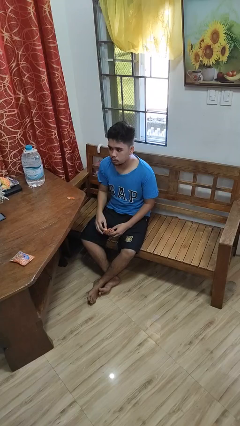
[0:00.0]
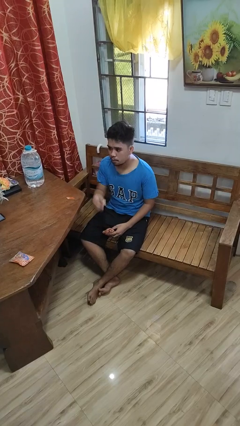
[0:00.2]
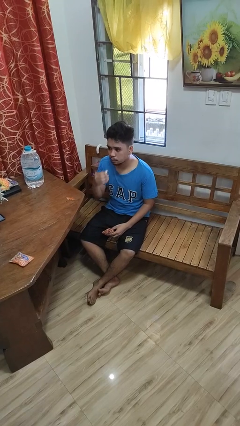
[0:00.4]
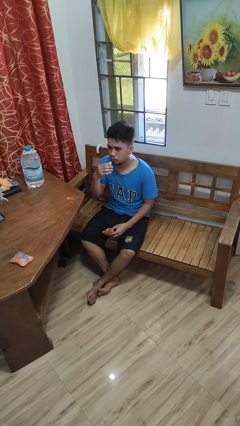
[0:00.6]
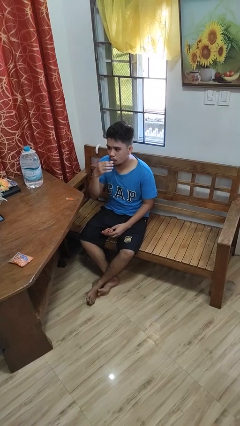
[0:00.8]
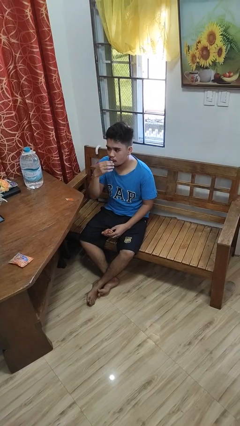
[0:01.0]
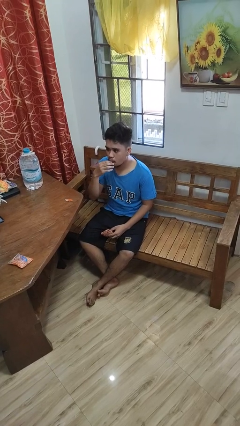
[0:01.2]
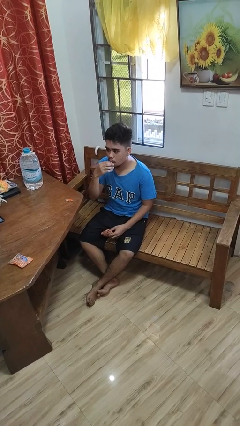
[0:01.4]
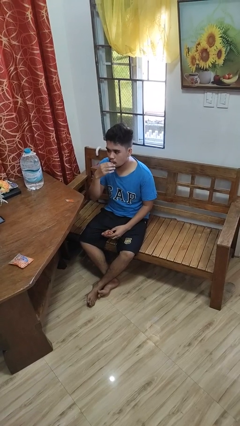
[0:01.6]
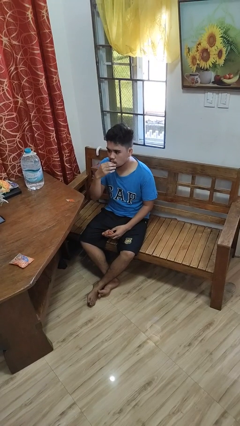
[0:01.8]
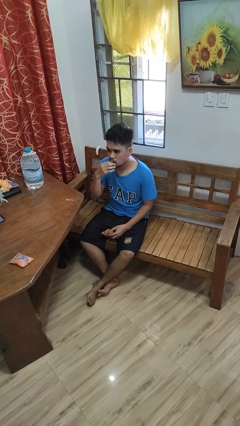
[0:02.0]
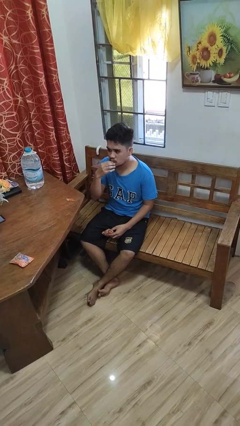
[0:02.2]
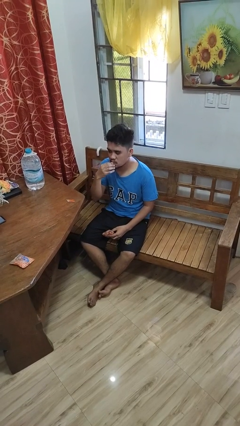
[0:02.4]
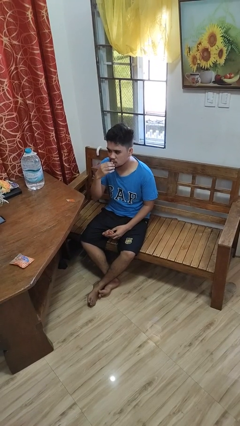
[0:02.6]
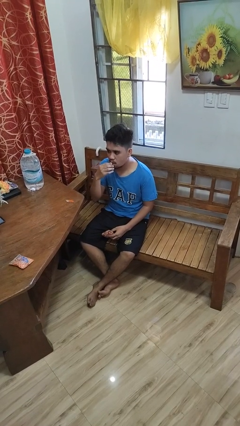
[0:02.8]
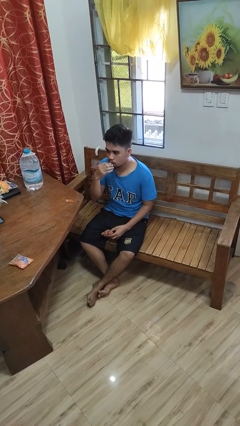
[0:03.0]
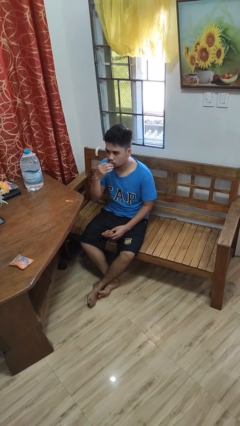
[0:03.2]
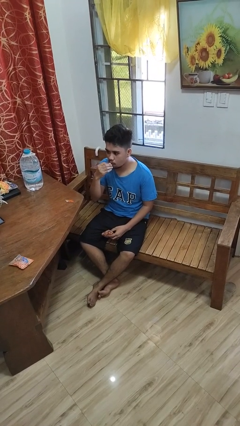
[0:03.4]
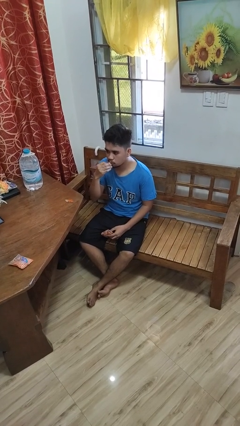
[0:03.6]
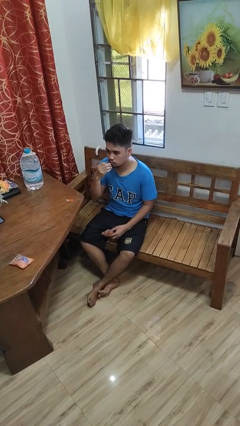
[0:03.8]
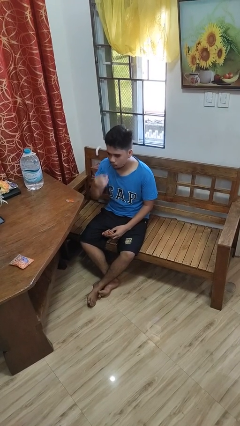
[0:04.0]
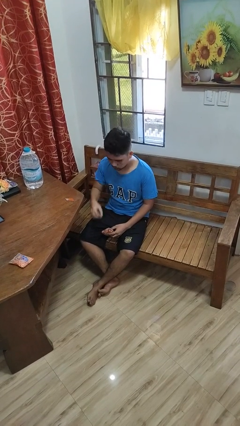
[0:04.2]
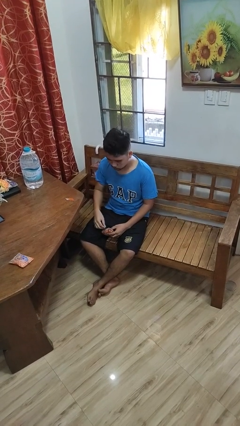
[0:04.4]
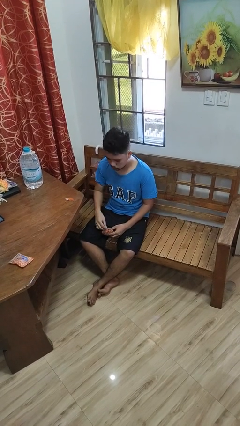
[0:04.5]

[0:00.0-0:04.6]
person eats snack from bag

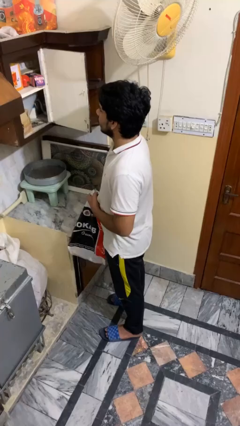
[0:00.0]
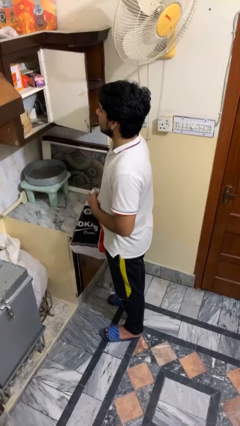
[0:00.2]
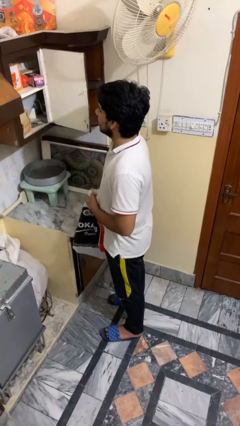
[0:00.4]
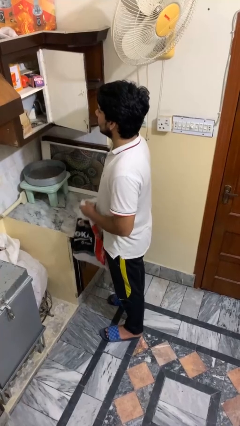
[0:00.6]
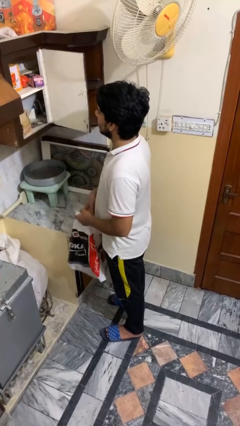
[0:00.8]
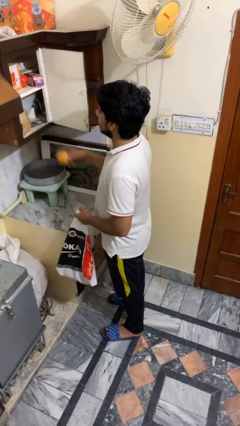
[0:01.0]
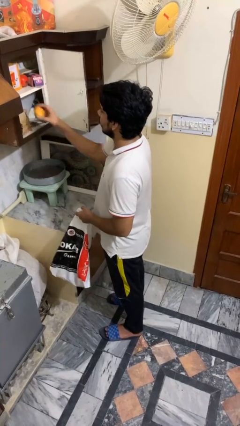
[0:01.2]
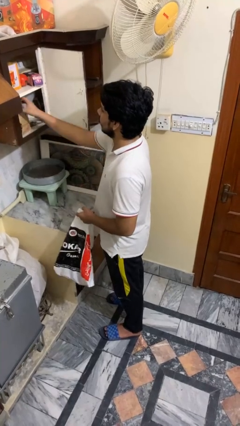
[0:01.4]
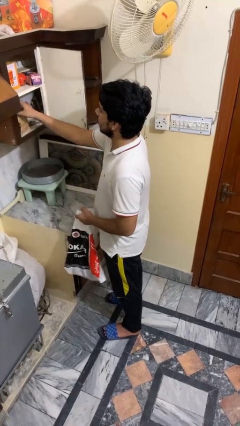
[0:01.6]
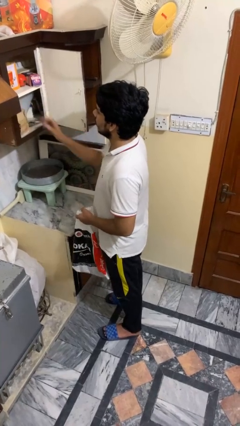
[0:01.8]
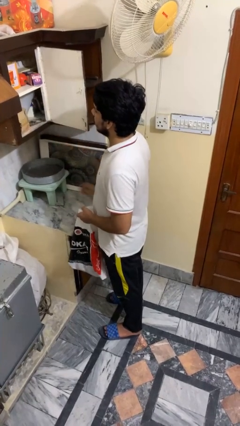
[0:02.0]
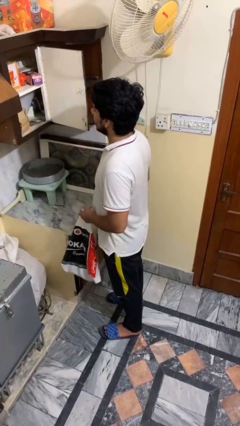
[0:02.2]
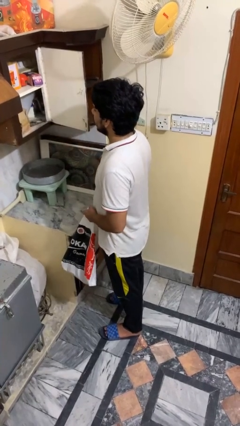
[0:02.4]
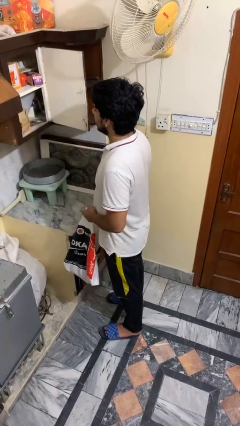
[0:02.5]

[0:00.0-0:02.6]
person loads groceries into cabinet

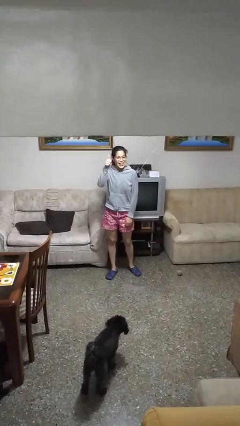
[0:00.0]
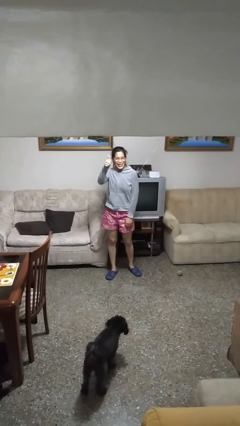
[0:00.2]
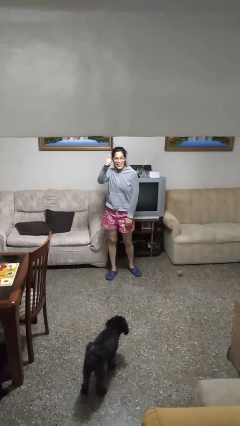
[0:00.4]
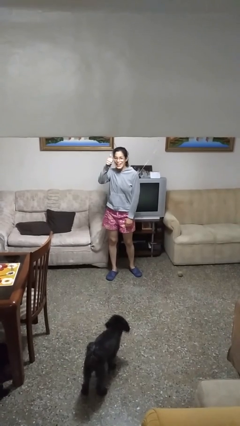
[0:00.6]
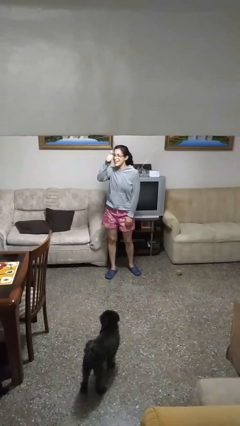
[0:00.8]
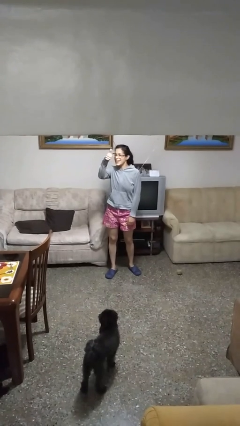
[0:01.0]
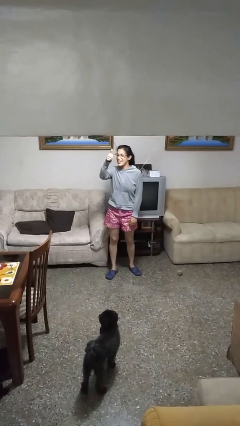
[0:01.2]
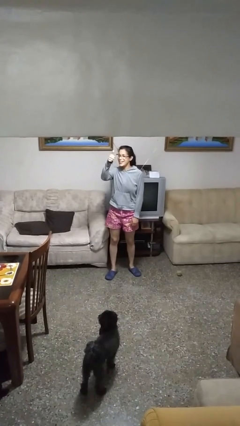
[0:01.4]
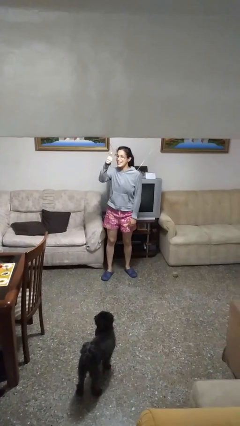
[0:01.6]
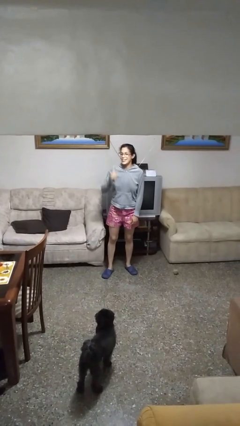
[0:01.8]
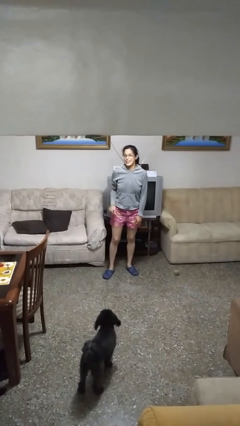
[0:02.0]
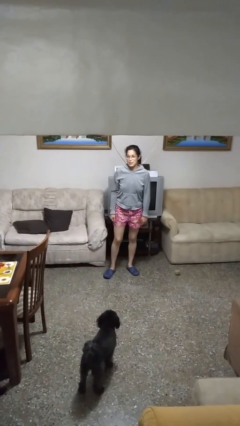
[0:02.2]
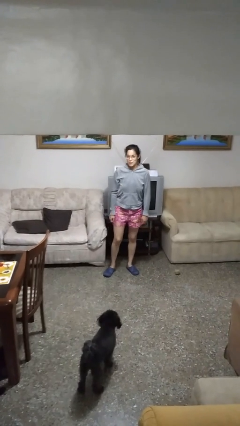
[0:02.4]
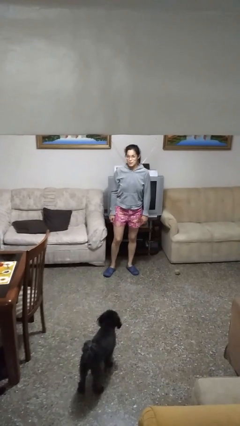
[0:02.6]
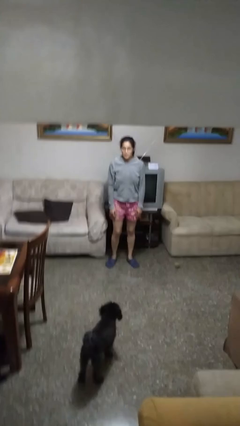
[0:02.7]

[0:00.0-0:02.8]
person gestures thumbs up

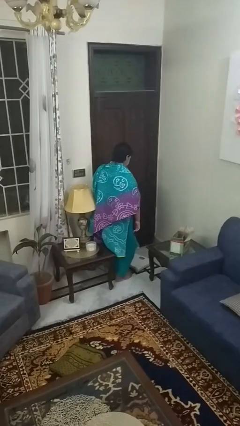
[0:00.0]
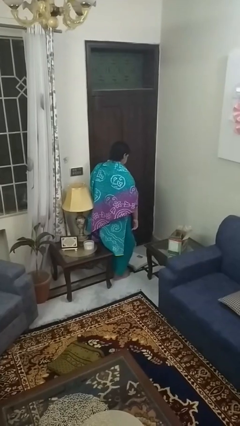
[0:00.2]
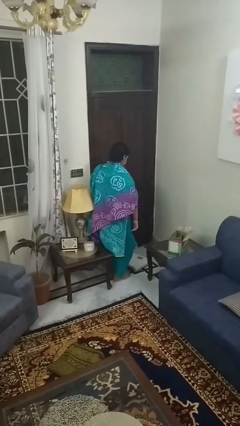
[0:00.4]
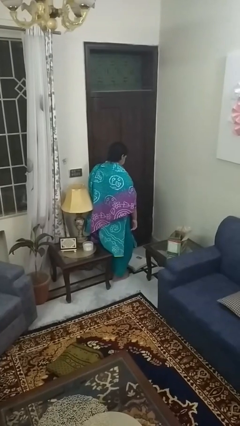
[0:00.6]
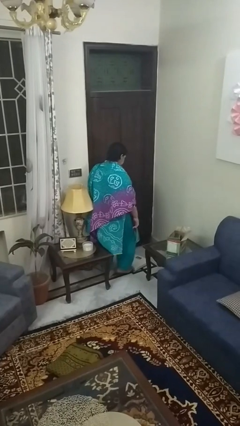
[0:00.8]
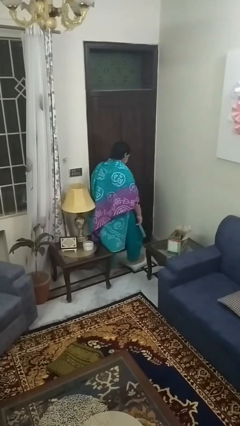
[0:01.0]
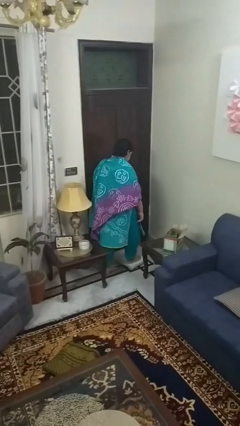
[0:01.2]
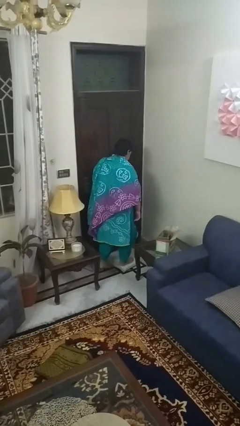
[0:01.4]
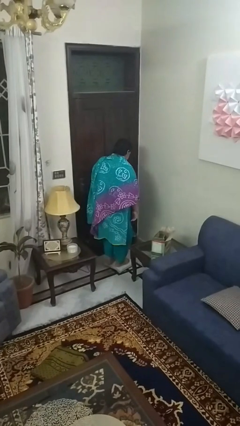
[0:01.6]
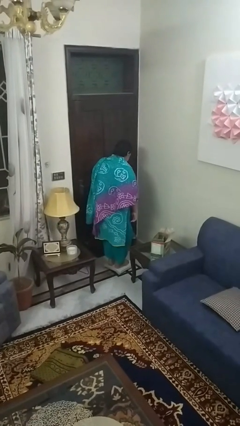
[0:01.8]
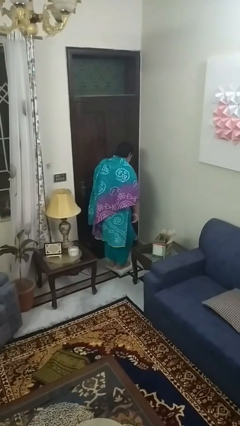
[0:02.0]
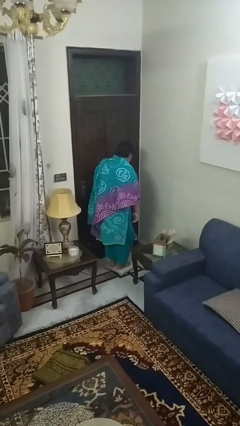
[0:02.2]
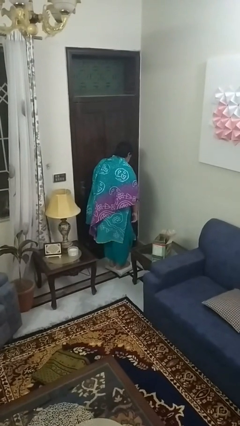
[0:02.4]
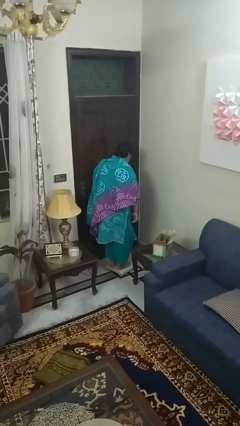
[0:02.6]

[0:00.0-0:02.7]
person uses bodyweight scale

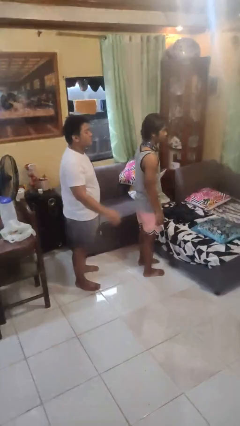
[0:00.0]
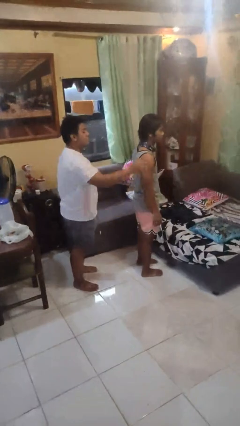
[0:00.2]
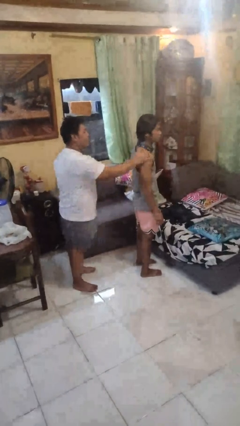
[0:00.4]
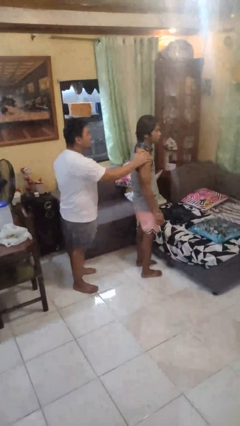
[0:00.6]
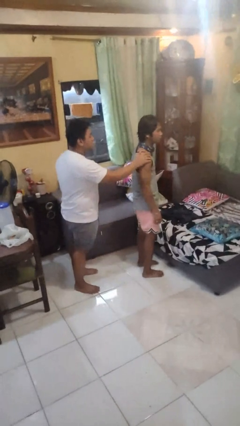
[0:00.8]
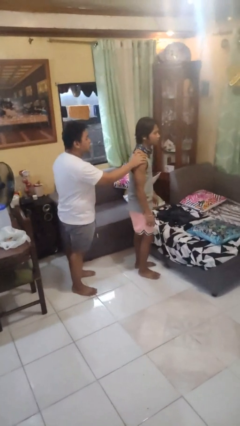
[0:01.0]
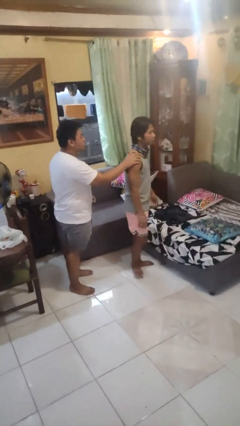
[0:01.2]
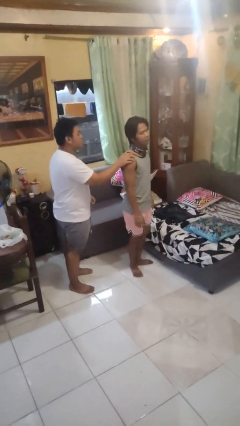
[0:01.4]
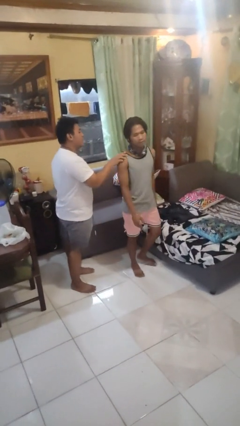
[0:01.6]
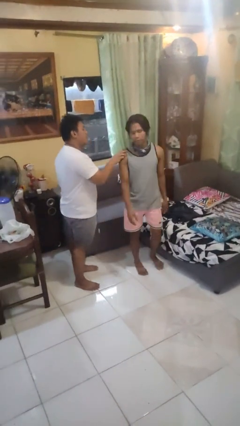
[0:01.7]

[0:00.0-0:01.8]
person grabs person by shoulder

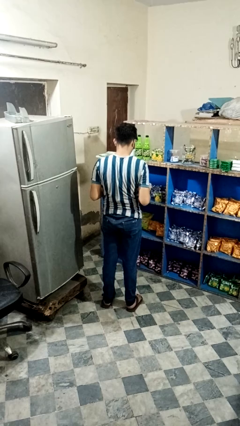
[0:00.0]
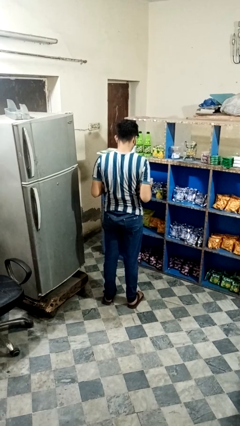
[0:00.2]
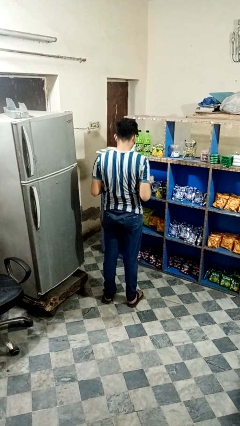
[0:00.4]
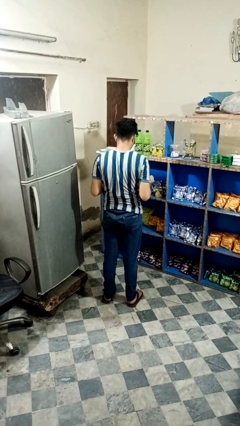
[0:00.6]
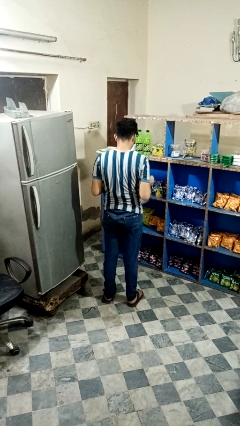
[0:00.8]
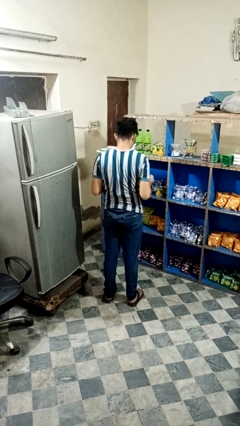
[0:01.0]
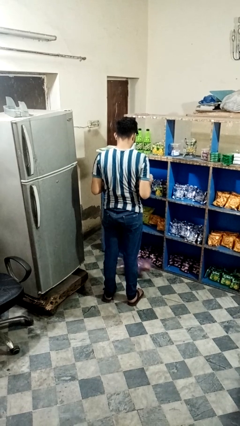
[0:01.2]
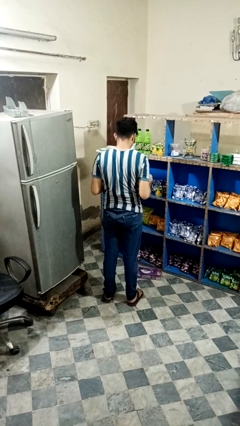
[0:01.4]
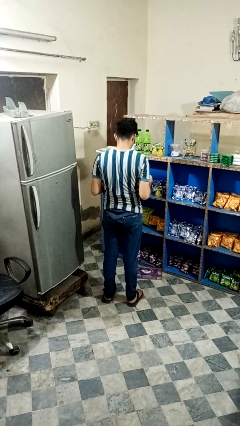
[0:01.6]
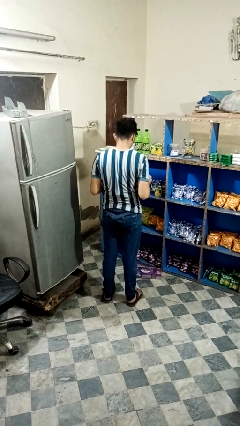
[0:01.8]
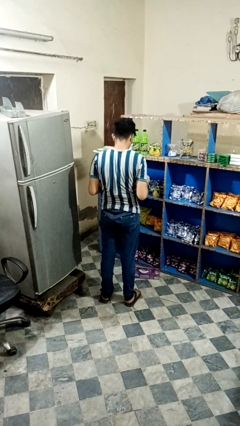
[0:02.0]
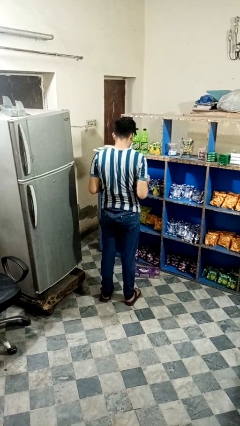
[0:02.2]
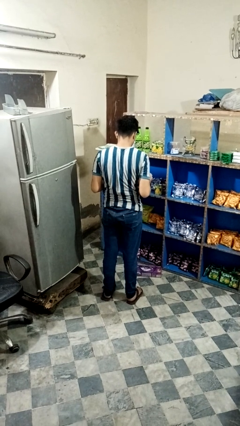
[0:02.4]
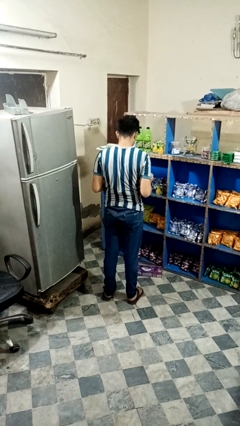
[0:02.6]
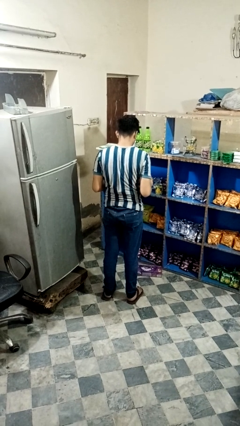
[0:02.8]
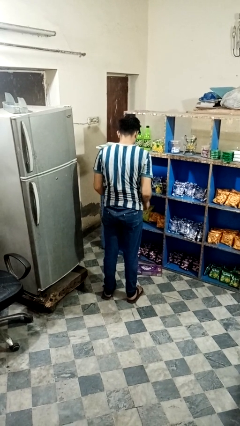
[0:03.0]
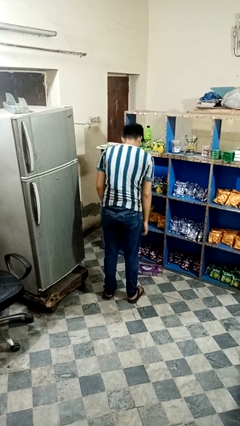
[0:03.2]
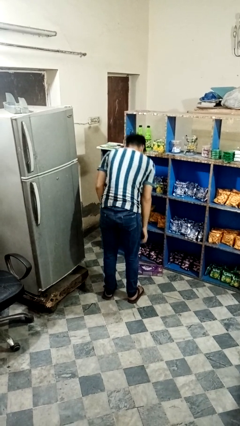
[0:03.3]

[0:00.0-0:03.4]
person drops object
